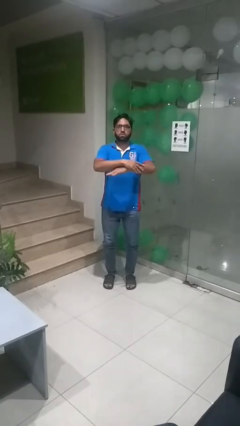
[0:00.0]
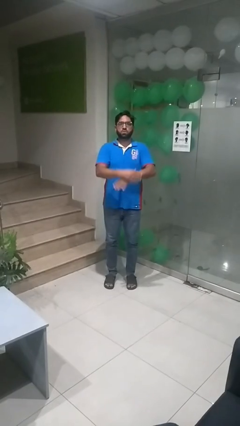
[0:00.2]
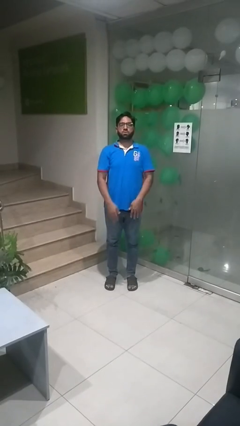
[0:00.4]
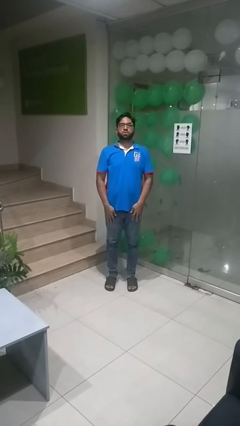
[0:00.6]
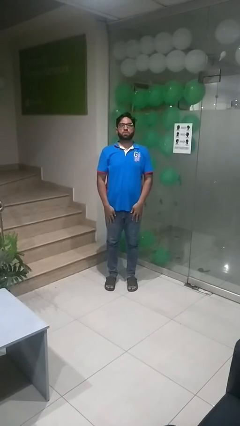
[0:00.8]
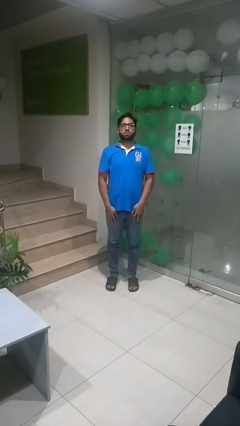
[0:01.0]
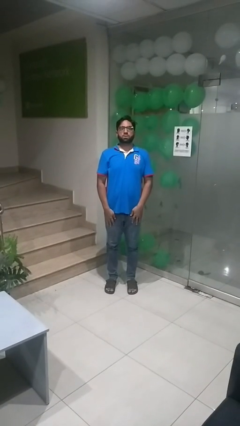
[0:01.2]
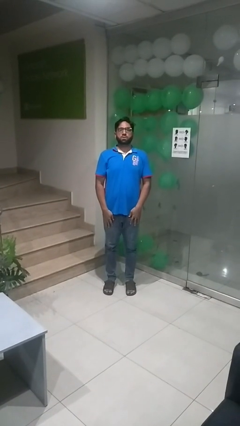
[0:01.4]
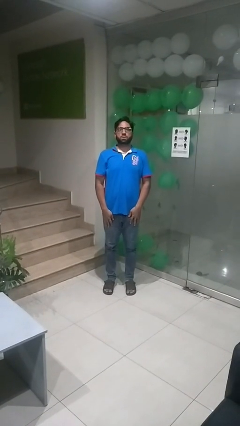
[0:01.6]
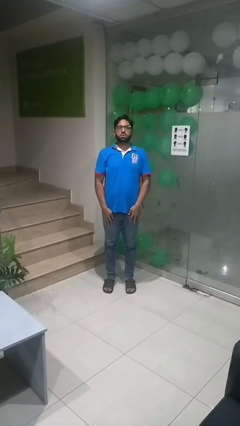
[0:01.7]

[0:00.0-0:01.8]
person stands up

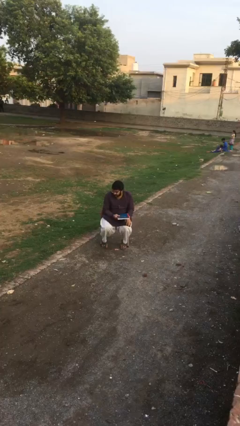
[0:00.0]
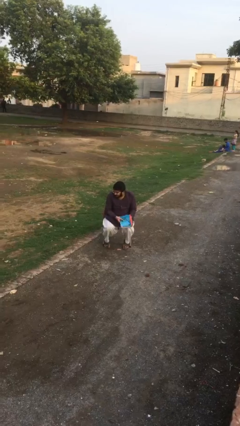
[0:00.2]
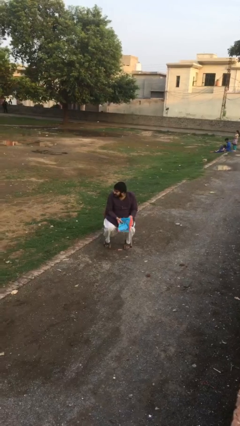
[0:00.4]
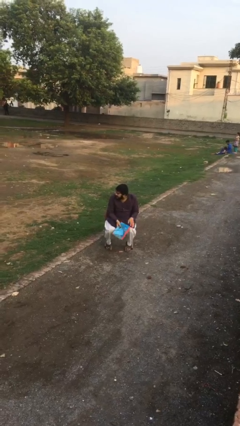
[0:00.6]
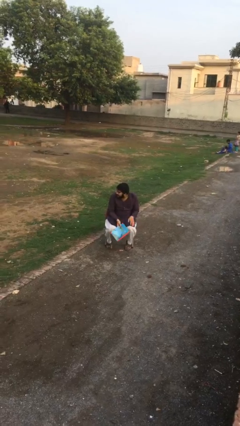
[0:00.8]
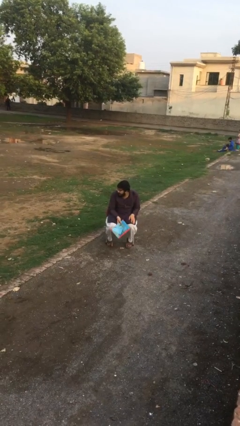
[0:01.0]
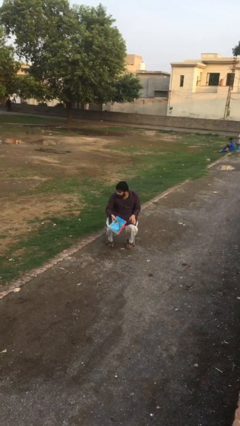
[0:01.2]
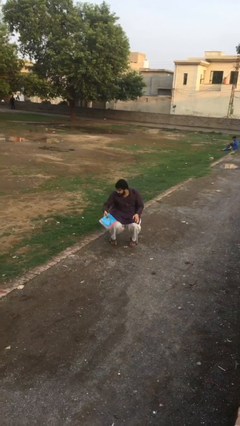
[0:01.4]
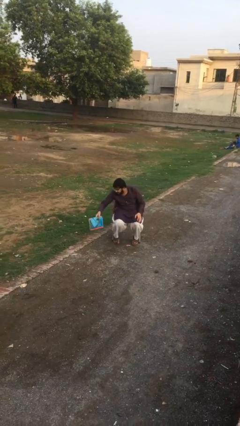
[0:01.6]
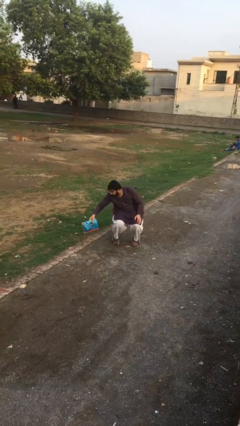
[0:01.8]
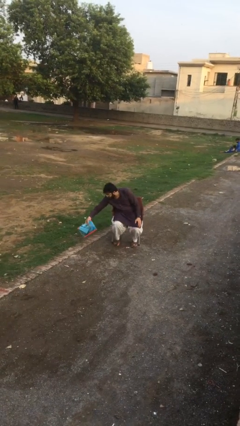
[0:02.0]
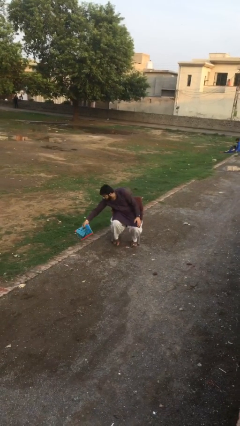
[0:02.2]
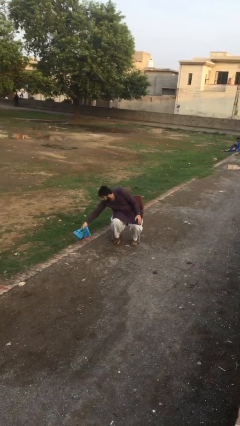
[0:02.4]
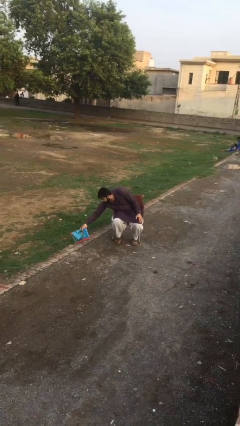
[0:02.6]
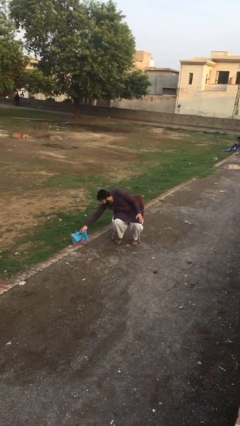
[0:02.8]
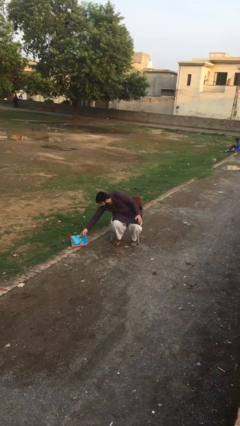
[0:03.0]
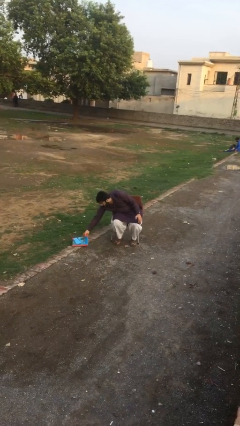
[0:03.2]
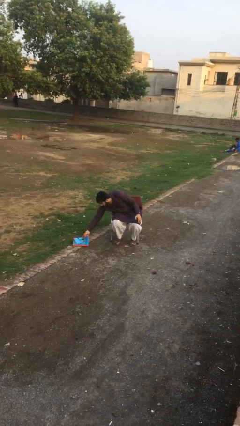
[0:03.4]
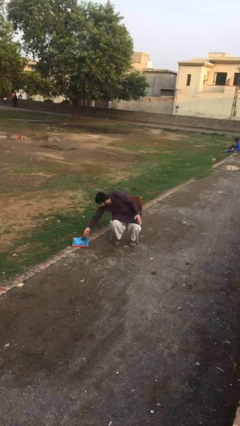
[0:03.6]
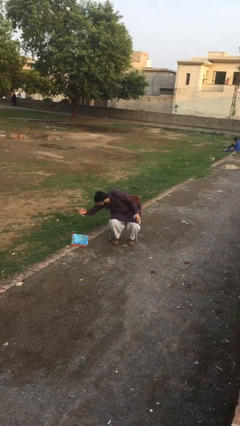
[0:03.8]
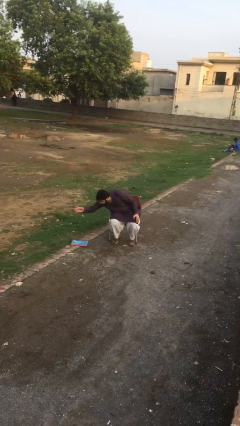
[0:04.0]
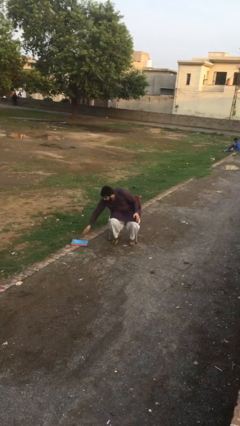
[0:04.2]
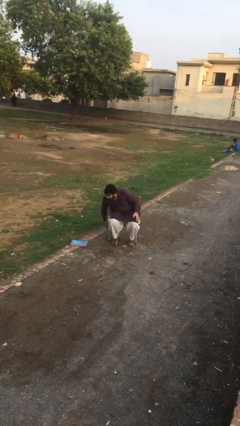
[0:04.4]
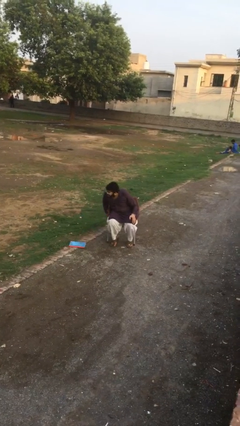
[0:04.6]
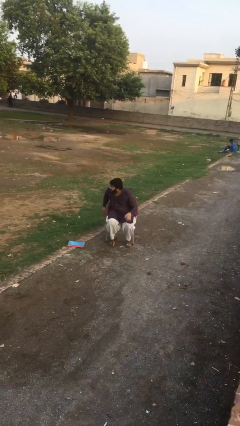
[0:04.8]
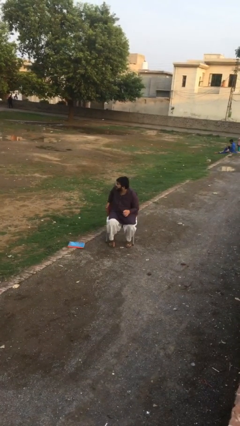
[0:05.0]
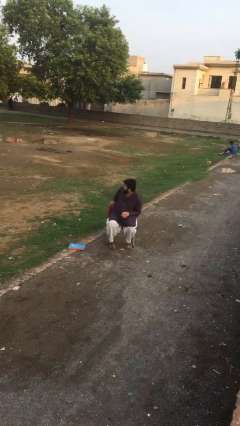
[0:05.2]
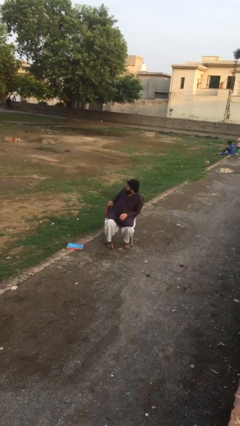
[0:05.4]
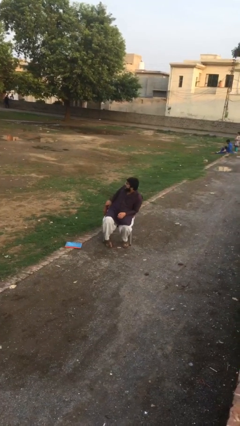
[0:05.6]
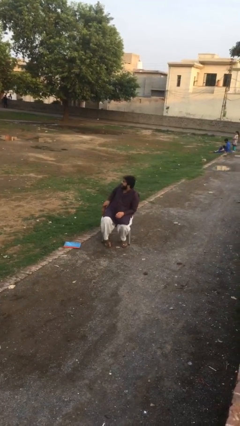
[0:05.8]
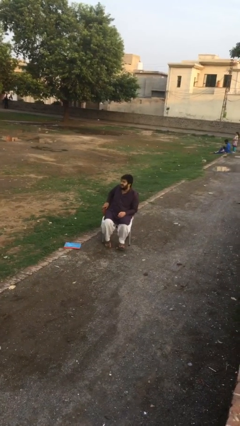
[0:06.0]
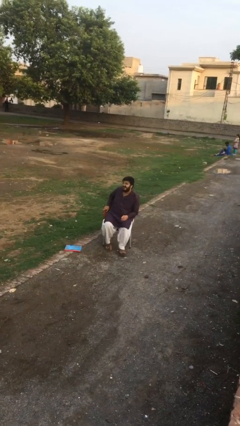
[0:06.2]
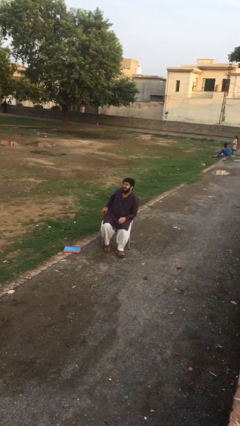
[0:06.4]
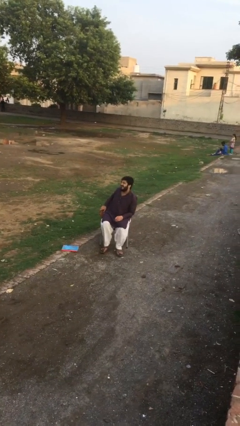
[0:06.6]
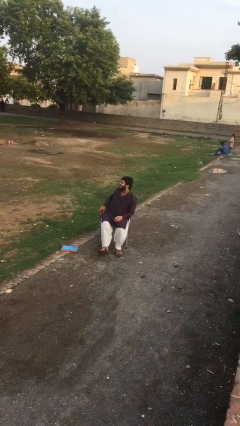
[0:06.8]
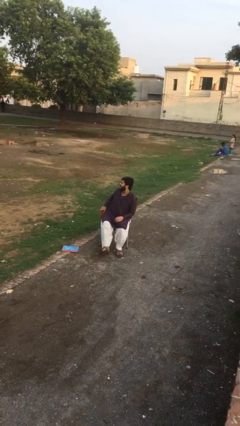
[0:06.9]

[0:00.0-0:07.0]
person puts down object on floor

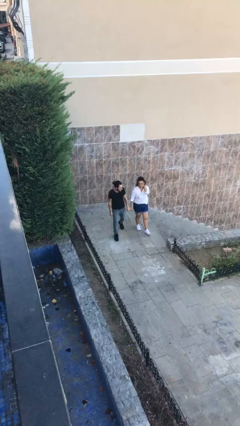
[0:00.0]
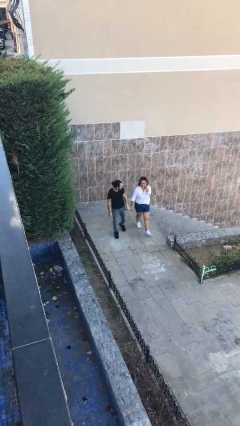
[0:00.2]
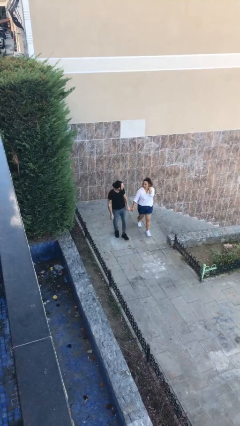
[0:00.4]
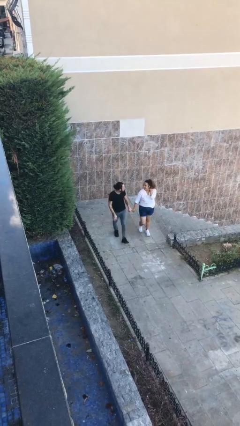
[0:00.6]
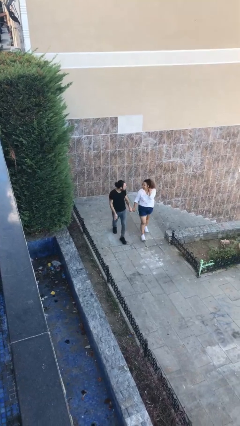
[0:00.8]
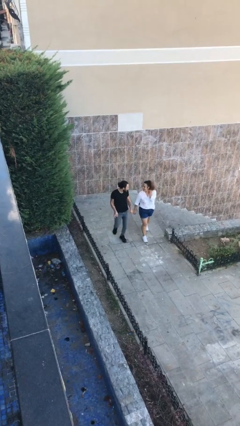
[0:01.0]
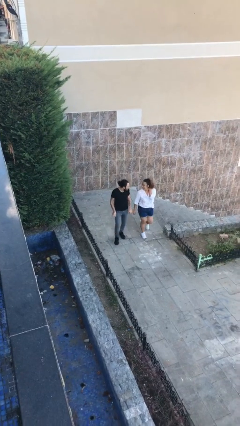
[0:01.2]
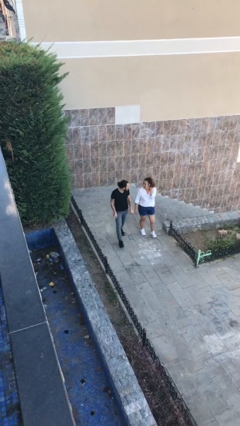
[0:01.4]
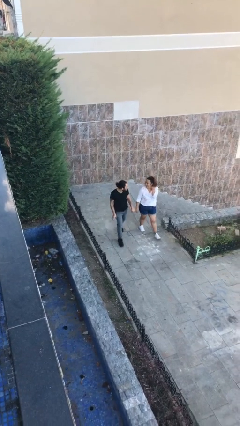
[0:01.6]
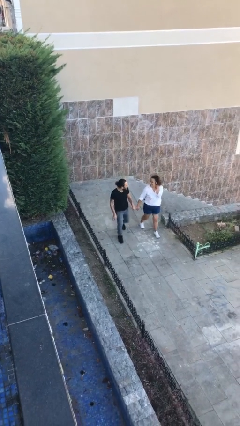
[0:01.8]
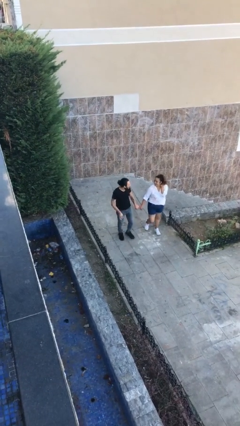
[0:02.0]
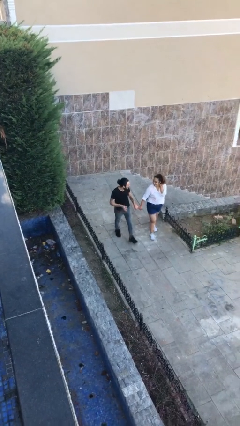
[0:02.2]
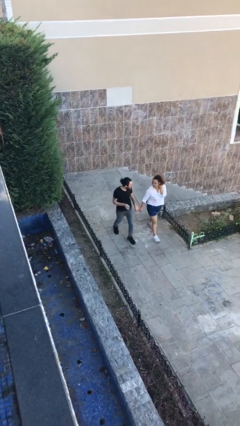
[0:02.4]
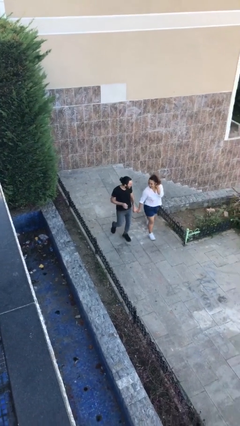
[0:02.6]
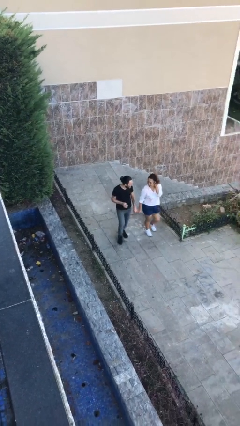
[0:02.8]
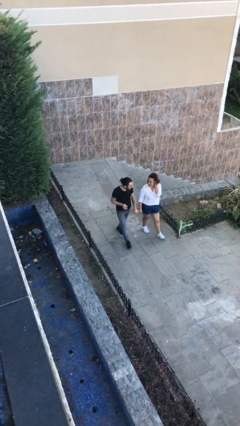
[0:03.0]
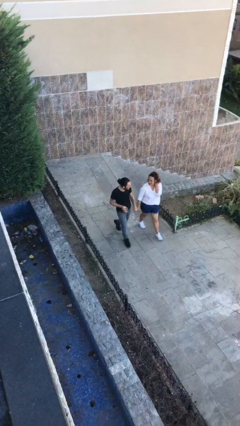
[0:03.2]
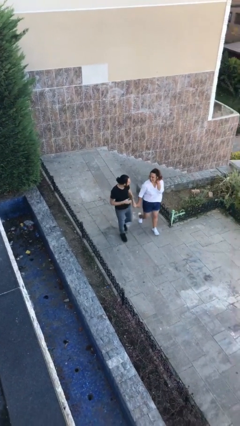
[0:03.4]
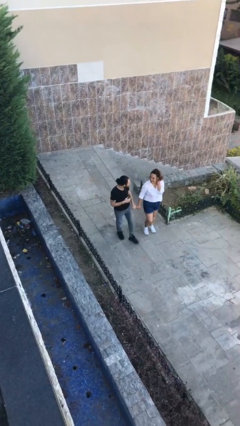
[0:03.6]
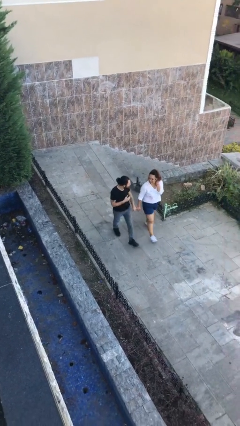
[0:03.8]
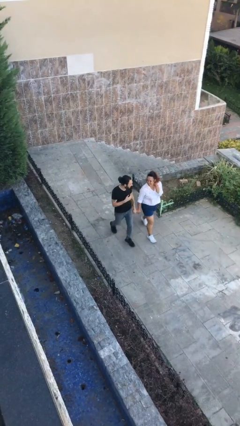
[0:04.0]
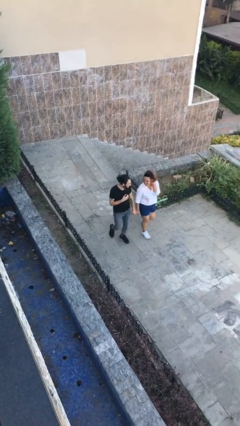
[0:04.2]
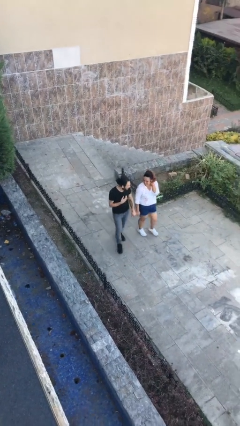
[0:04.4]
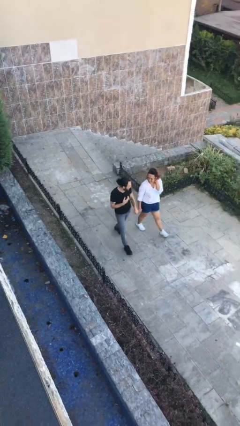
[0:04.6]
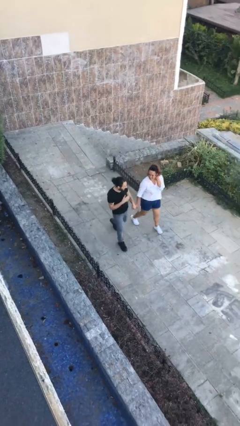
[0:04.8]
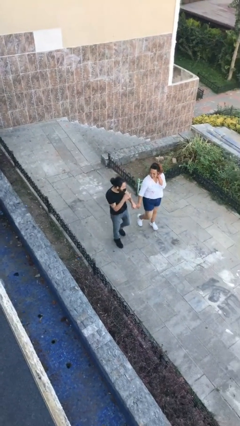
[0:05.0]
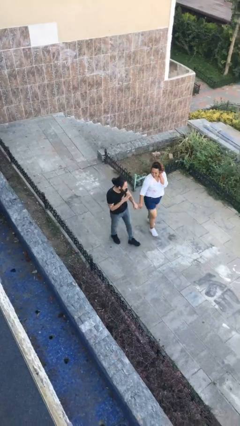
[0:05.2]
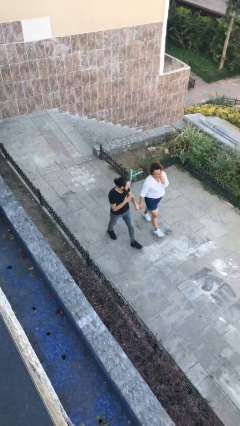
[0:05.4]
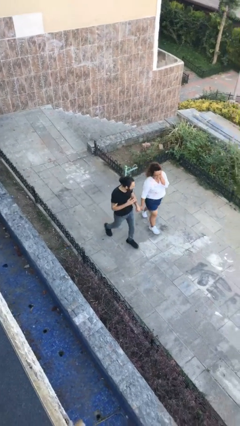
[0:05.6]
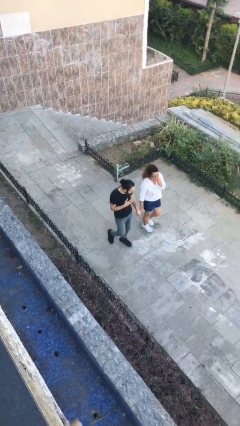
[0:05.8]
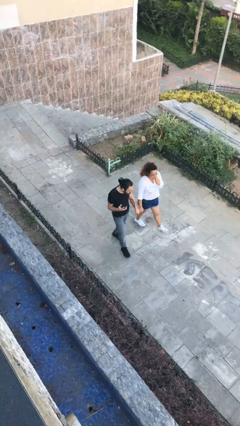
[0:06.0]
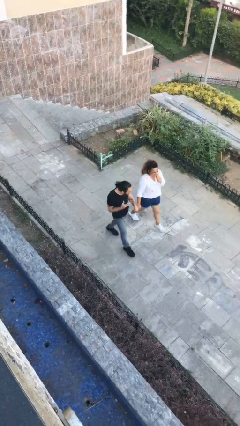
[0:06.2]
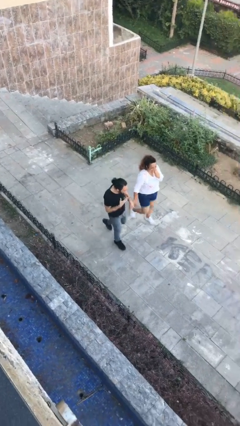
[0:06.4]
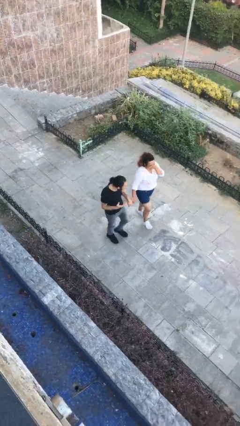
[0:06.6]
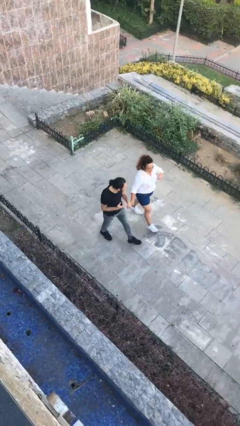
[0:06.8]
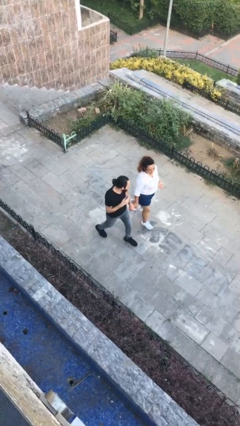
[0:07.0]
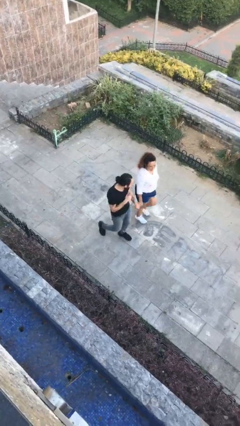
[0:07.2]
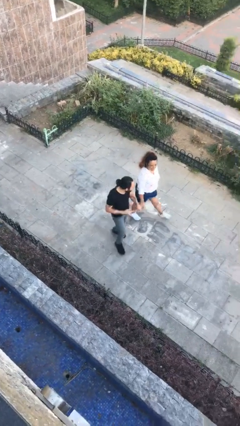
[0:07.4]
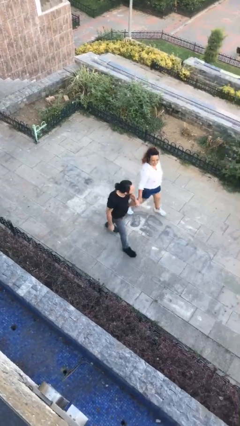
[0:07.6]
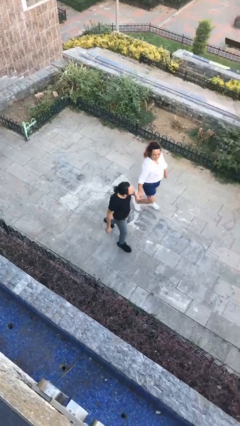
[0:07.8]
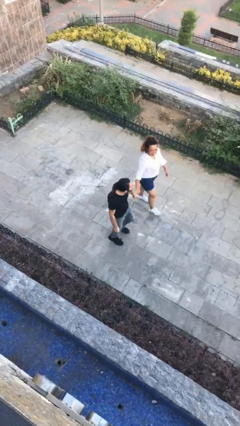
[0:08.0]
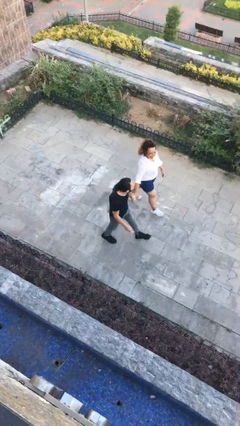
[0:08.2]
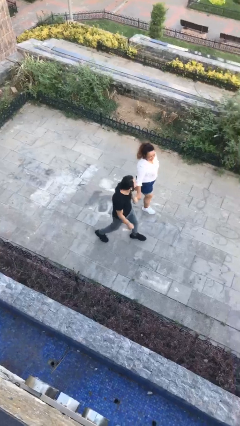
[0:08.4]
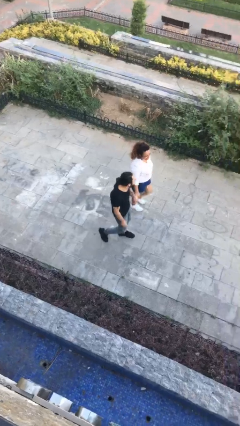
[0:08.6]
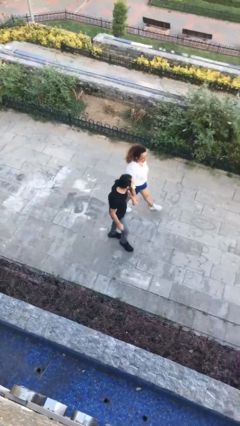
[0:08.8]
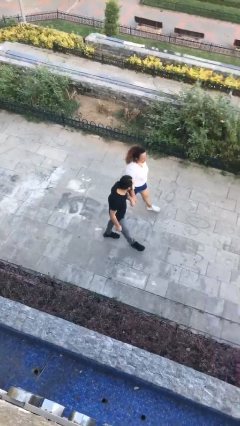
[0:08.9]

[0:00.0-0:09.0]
person holds hand
